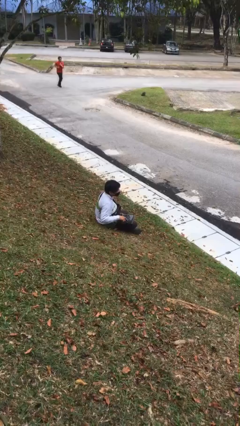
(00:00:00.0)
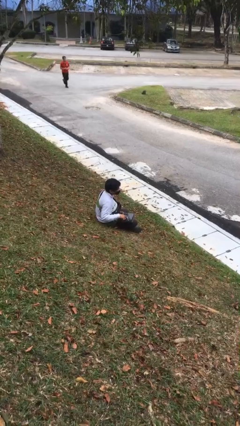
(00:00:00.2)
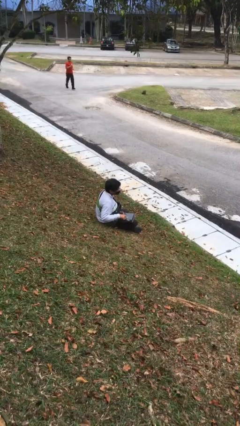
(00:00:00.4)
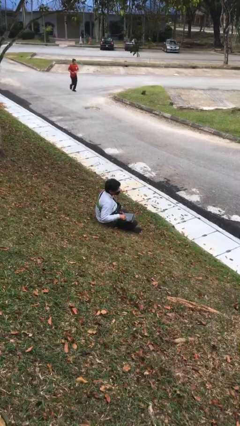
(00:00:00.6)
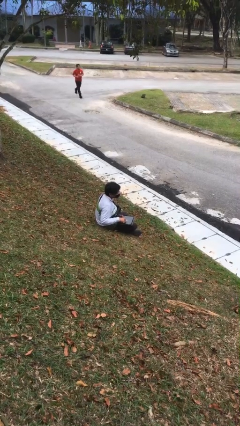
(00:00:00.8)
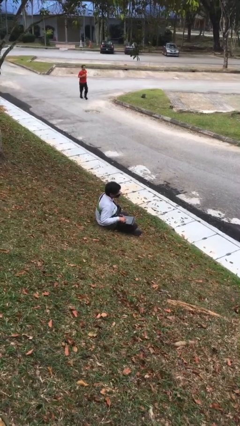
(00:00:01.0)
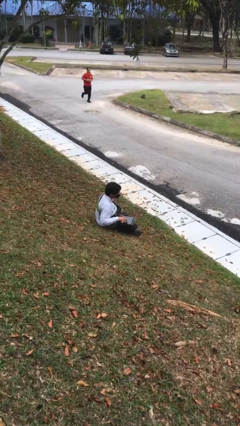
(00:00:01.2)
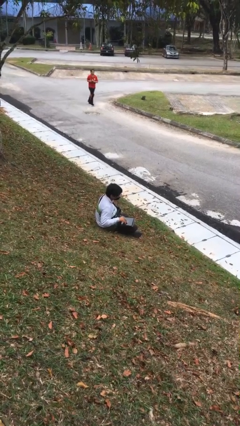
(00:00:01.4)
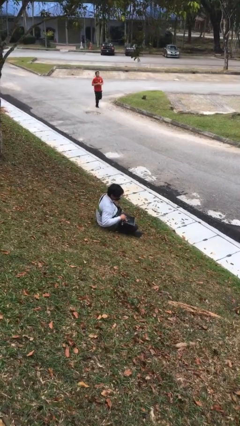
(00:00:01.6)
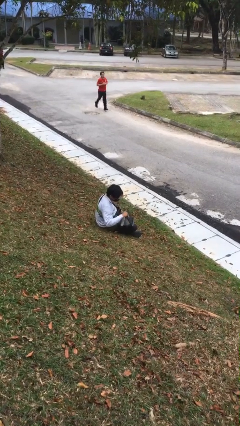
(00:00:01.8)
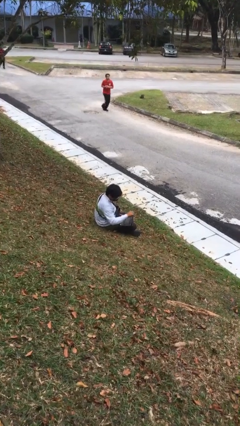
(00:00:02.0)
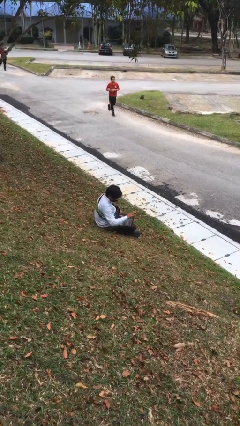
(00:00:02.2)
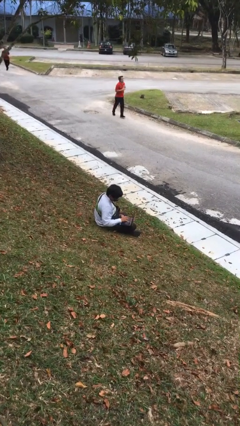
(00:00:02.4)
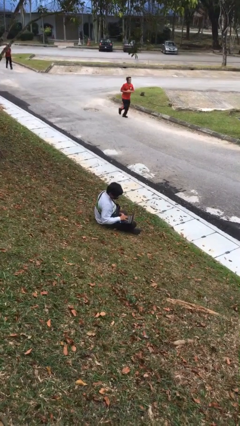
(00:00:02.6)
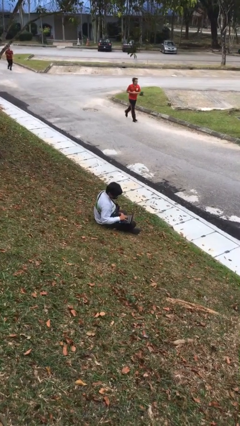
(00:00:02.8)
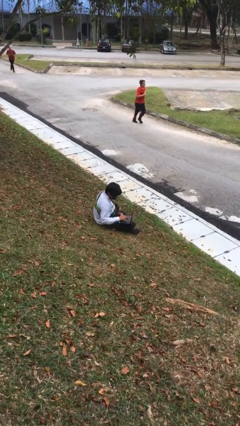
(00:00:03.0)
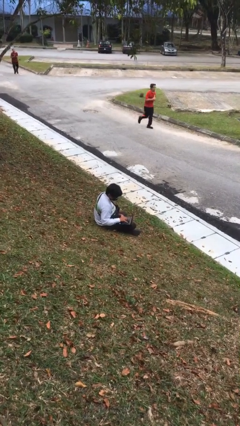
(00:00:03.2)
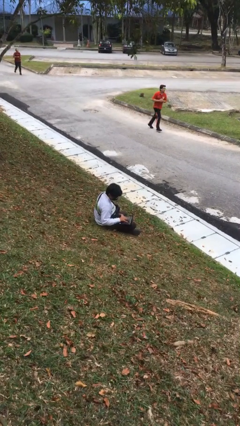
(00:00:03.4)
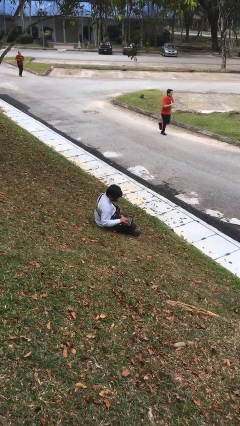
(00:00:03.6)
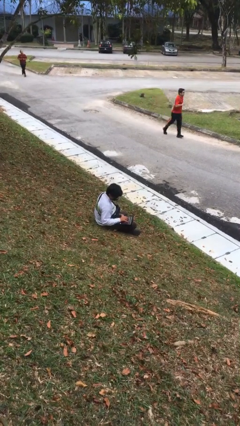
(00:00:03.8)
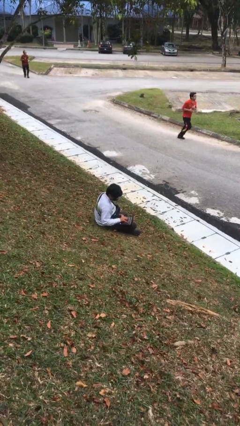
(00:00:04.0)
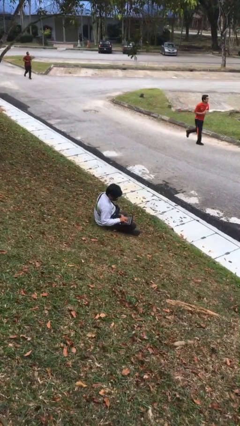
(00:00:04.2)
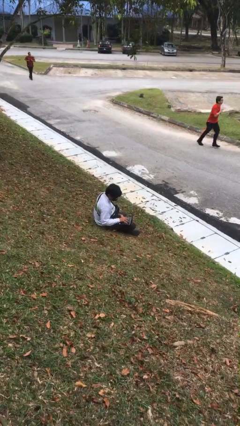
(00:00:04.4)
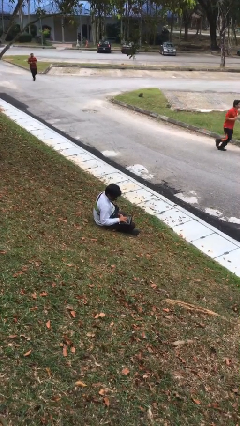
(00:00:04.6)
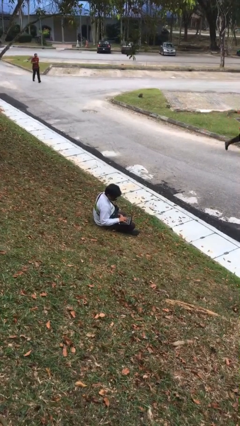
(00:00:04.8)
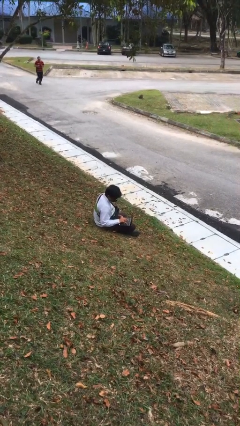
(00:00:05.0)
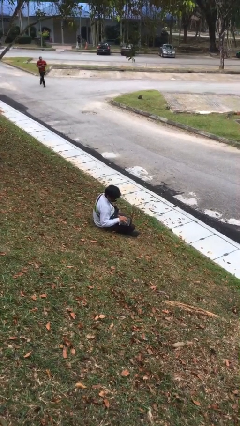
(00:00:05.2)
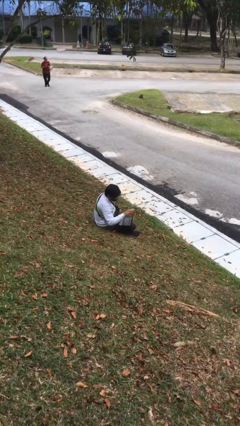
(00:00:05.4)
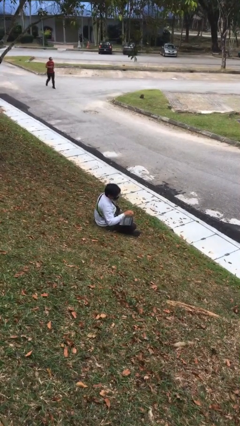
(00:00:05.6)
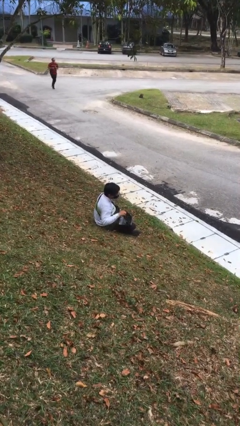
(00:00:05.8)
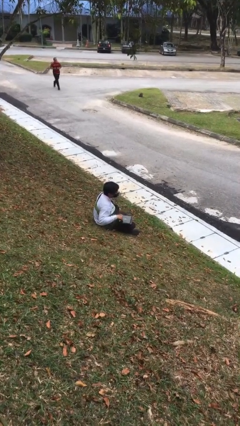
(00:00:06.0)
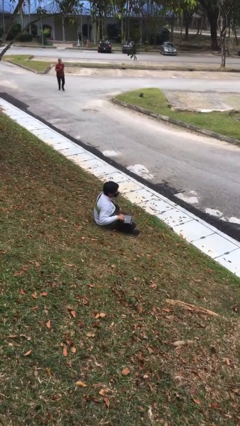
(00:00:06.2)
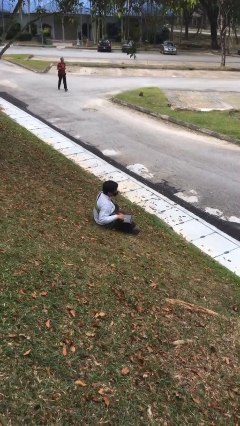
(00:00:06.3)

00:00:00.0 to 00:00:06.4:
person interacts with laptop

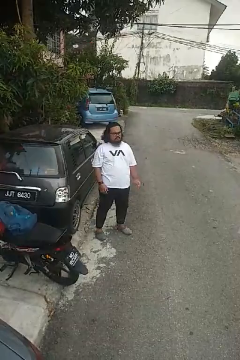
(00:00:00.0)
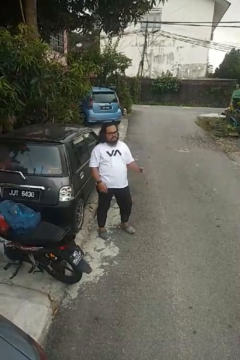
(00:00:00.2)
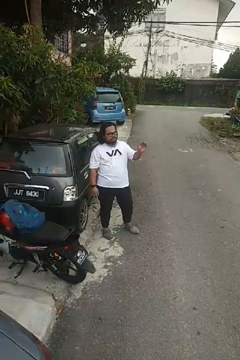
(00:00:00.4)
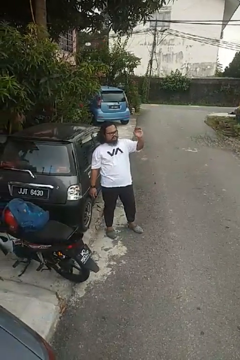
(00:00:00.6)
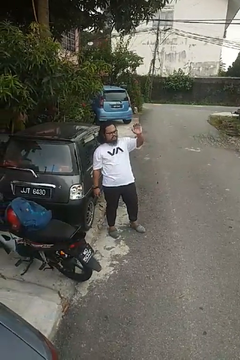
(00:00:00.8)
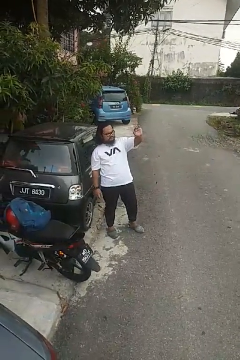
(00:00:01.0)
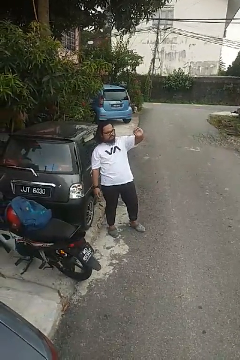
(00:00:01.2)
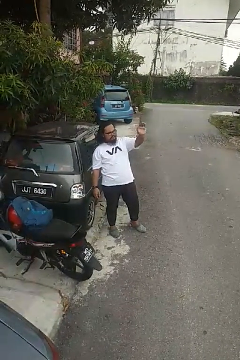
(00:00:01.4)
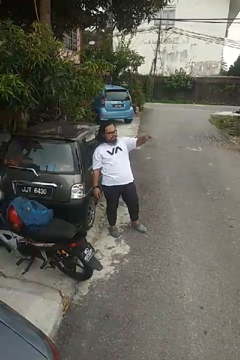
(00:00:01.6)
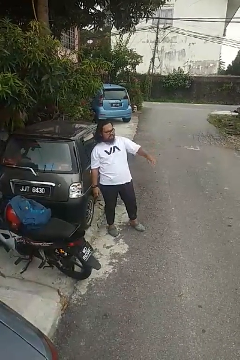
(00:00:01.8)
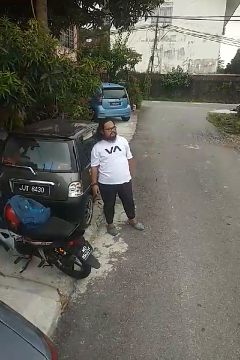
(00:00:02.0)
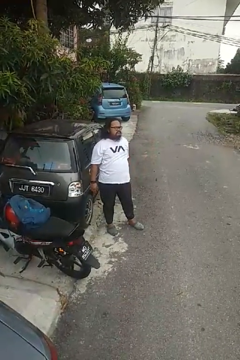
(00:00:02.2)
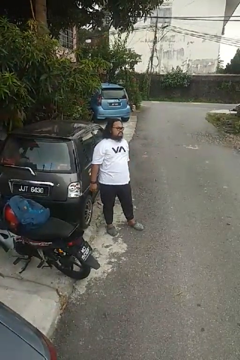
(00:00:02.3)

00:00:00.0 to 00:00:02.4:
person waves at person

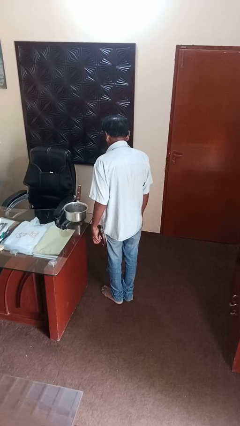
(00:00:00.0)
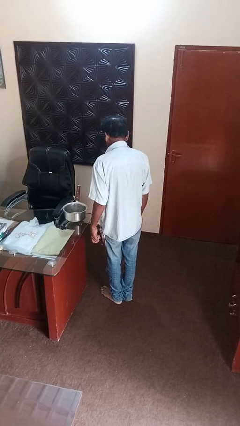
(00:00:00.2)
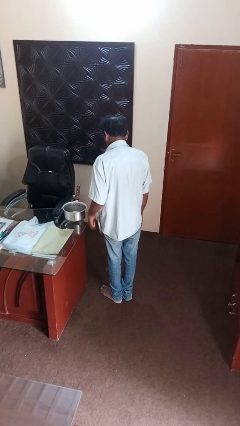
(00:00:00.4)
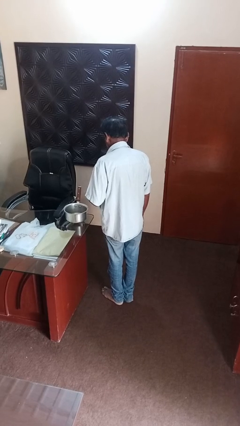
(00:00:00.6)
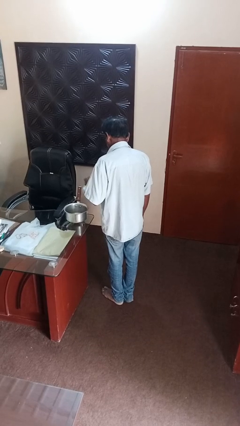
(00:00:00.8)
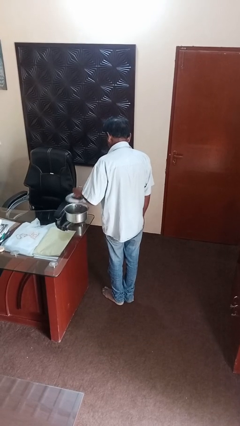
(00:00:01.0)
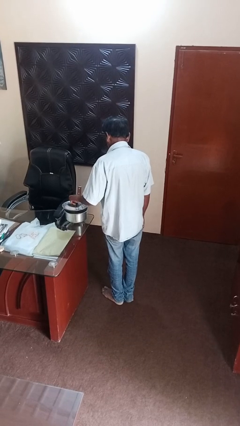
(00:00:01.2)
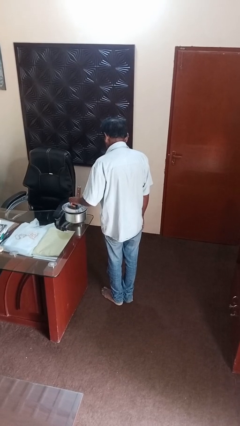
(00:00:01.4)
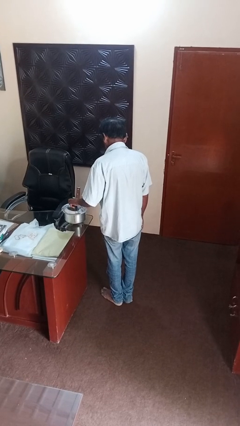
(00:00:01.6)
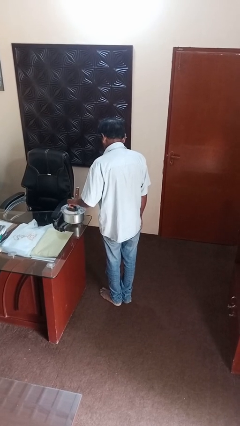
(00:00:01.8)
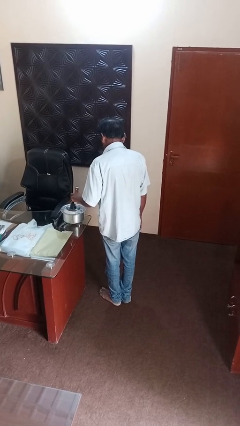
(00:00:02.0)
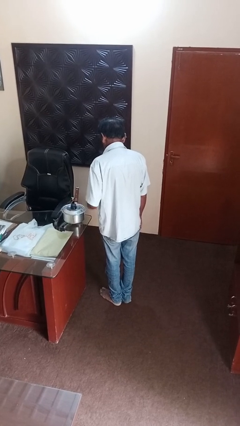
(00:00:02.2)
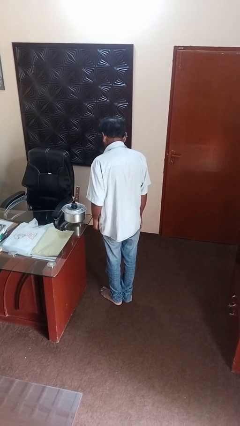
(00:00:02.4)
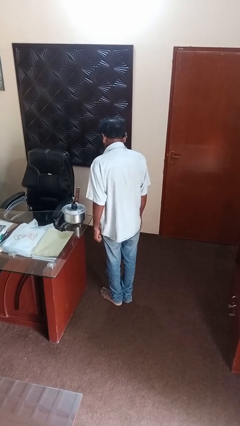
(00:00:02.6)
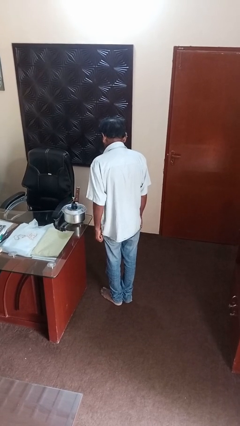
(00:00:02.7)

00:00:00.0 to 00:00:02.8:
person closes jar

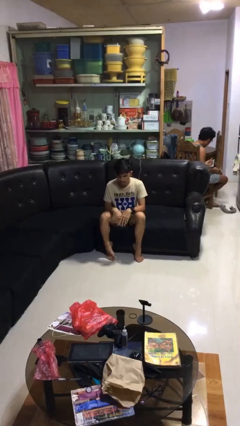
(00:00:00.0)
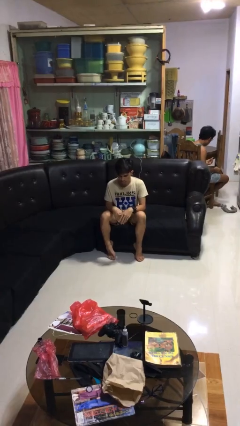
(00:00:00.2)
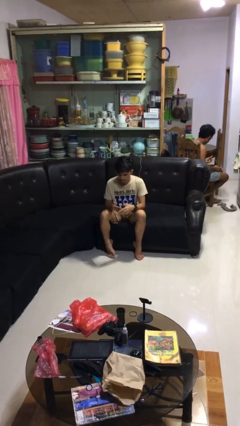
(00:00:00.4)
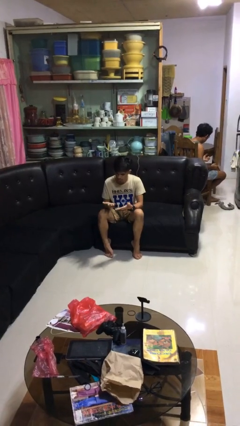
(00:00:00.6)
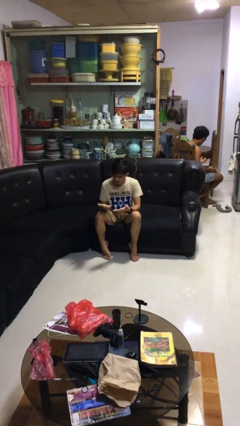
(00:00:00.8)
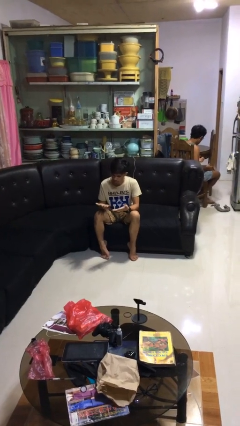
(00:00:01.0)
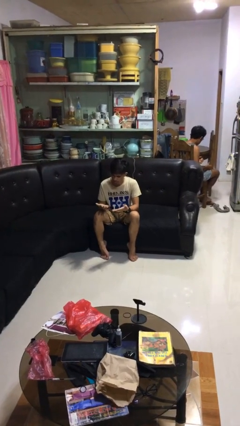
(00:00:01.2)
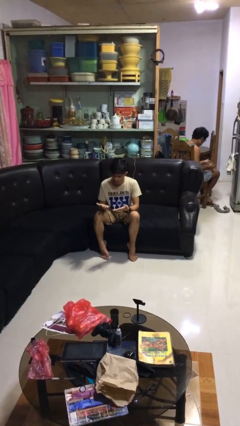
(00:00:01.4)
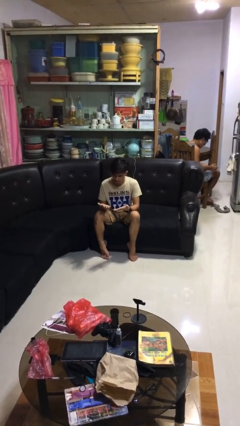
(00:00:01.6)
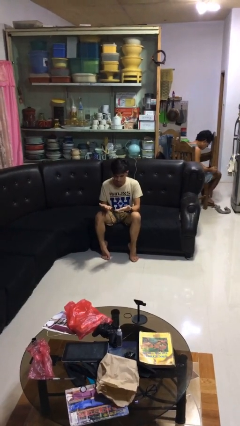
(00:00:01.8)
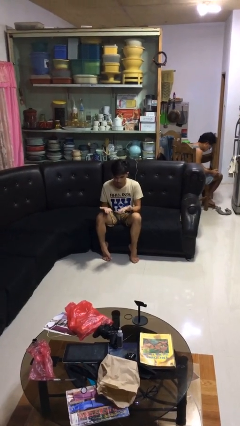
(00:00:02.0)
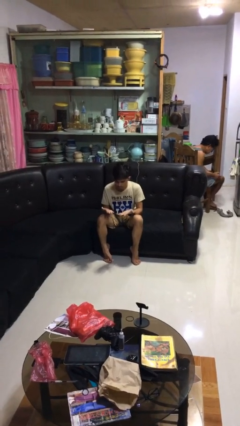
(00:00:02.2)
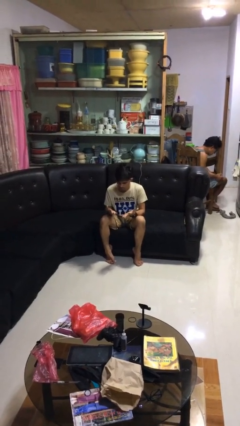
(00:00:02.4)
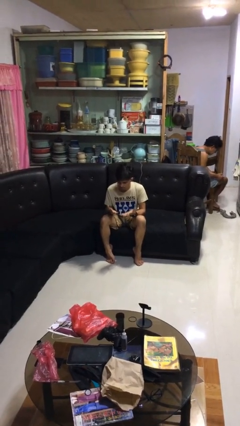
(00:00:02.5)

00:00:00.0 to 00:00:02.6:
person looks at hands in lap

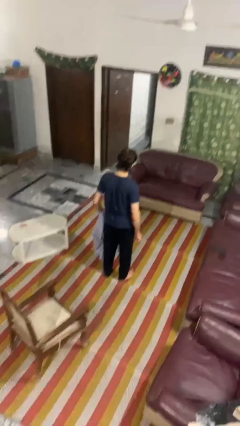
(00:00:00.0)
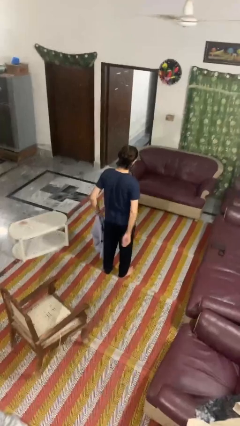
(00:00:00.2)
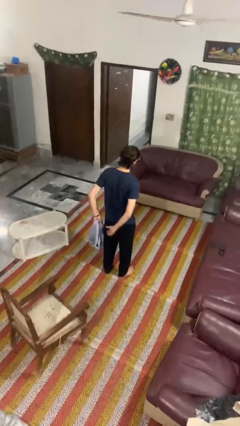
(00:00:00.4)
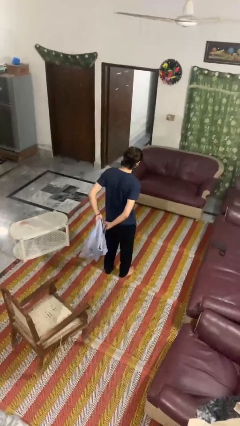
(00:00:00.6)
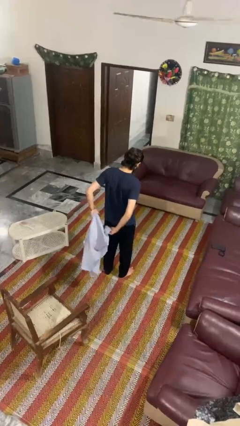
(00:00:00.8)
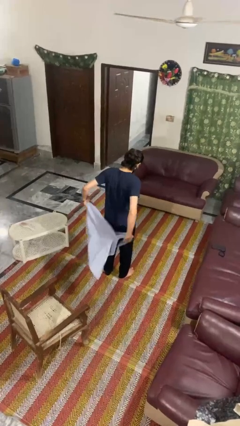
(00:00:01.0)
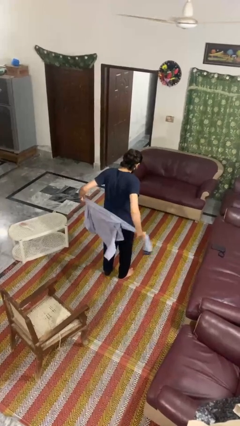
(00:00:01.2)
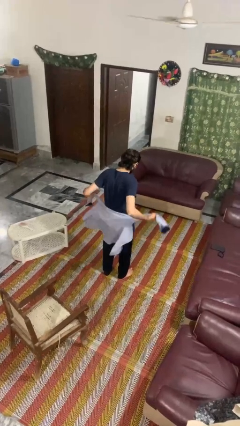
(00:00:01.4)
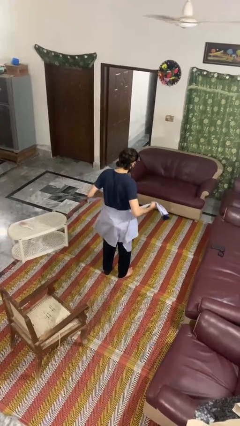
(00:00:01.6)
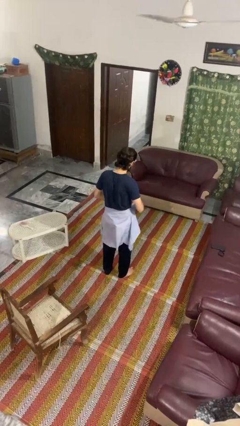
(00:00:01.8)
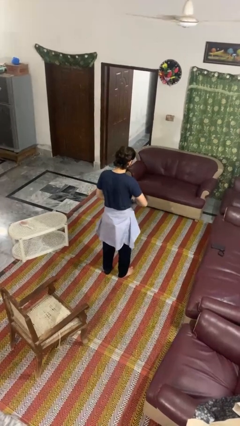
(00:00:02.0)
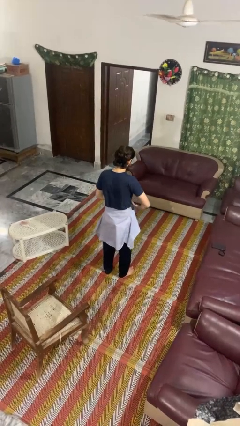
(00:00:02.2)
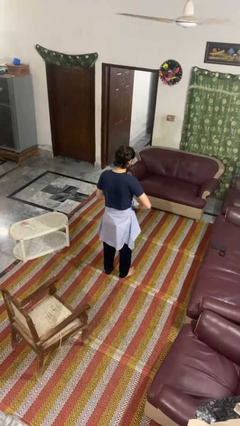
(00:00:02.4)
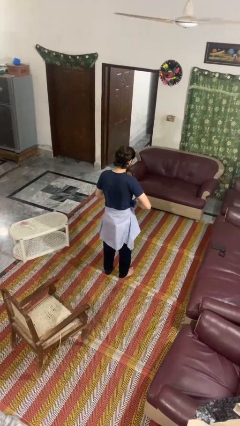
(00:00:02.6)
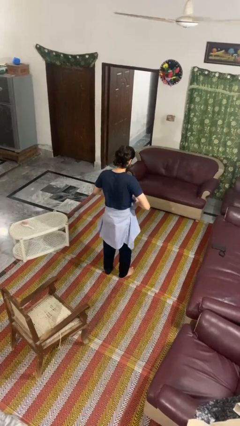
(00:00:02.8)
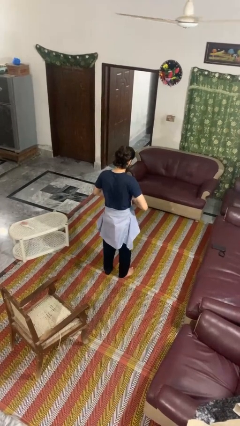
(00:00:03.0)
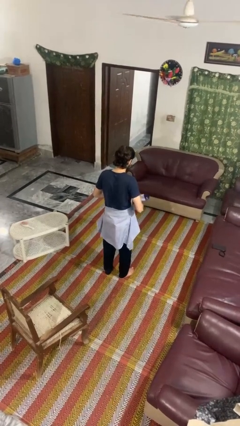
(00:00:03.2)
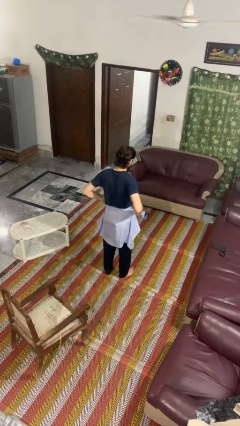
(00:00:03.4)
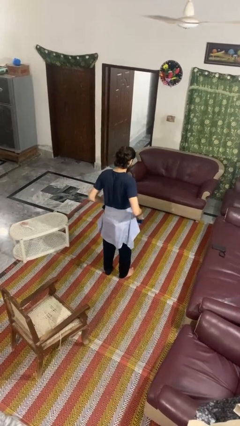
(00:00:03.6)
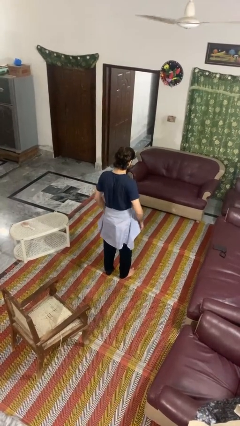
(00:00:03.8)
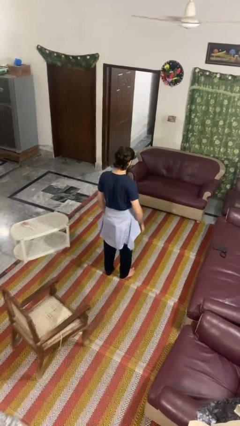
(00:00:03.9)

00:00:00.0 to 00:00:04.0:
person ties jacket around waist
